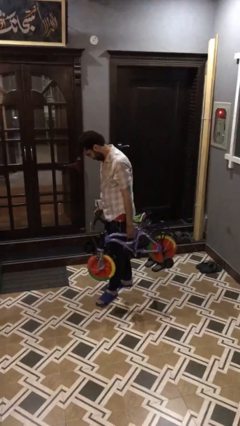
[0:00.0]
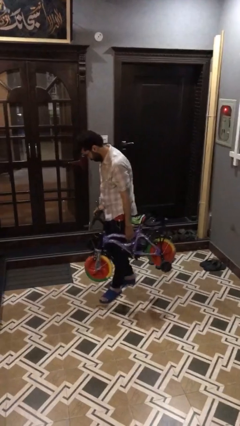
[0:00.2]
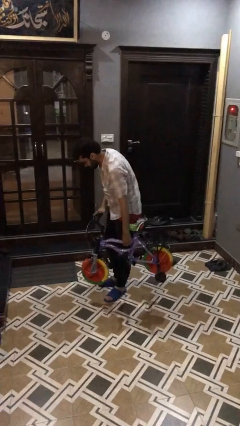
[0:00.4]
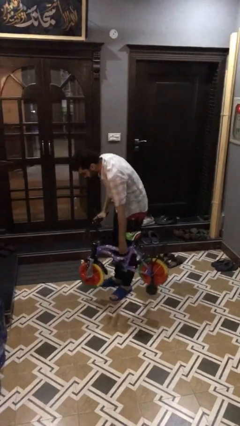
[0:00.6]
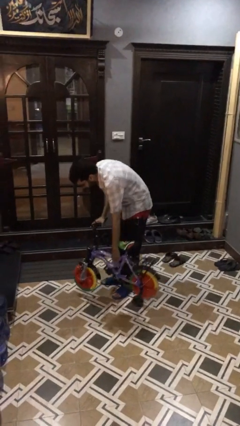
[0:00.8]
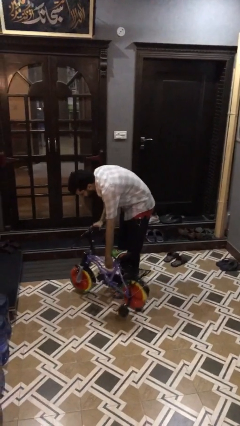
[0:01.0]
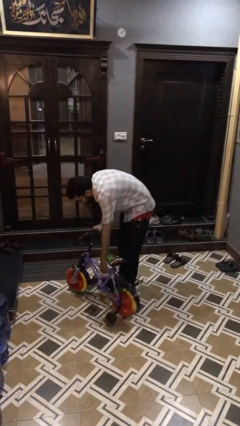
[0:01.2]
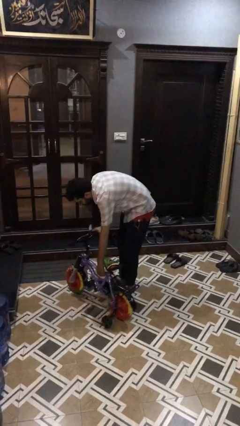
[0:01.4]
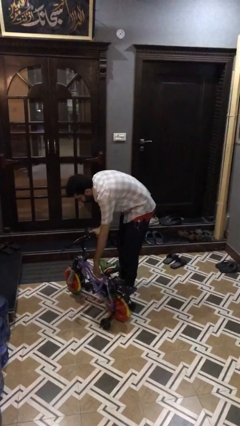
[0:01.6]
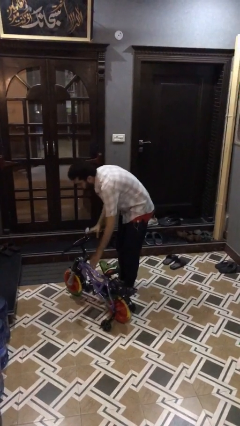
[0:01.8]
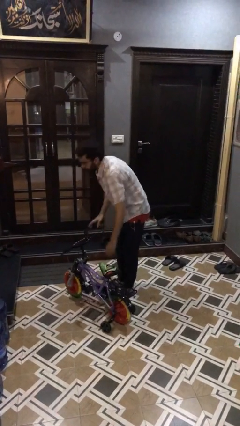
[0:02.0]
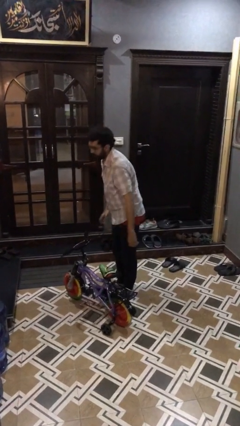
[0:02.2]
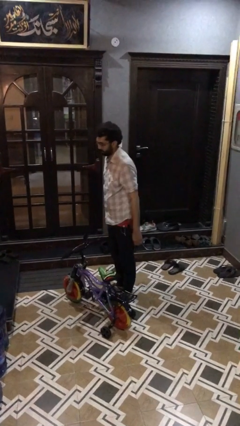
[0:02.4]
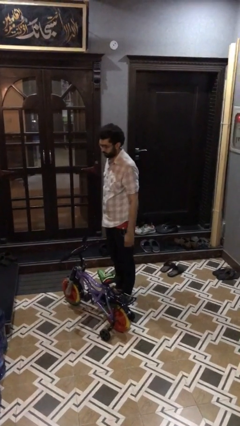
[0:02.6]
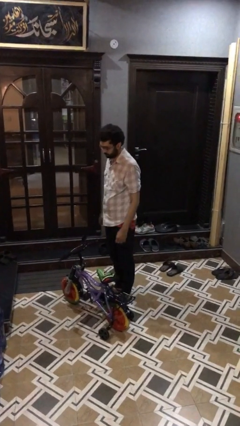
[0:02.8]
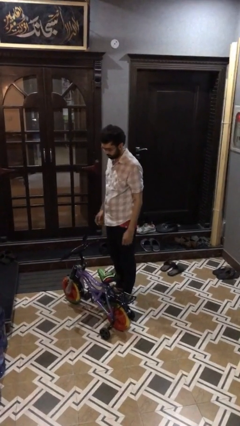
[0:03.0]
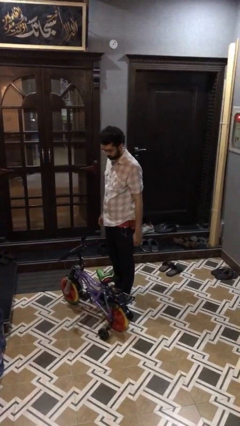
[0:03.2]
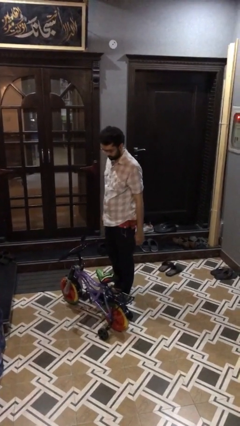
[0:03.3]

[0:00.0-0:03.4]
person puts down object on floor

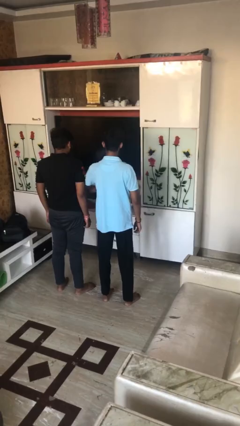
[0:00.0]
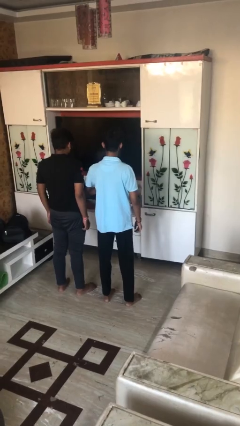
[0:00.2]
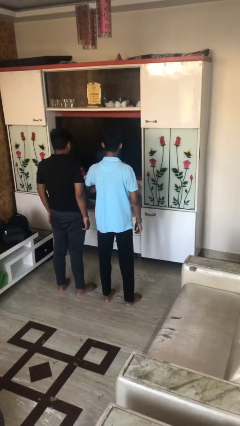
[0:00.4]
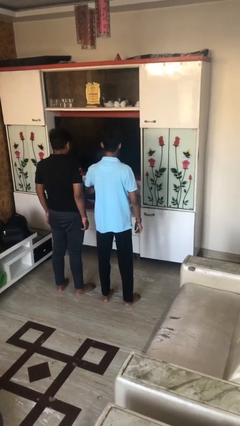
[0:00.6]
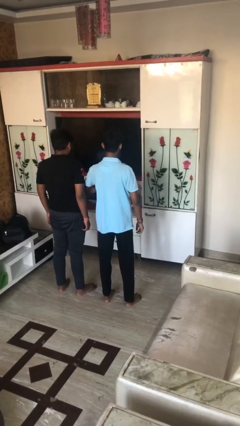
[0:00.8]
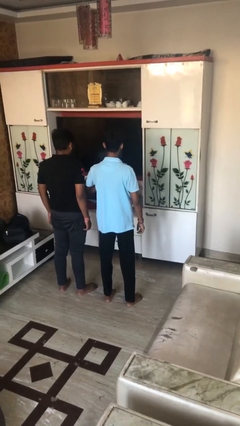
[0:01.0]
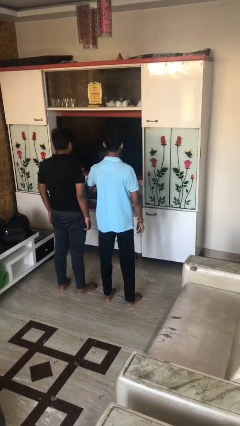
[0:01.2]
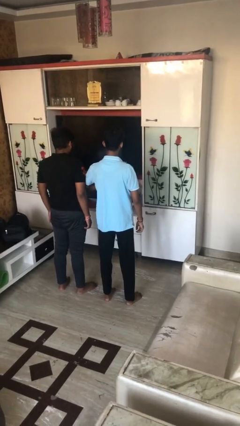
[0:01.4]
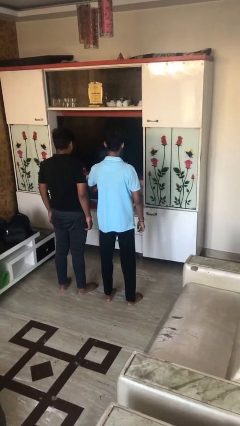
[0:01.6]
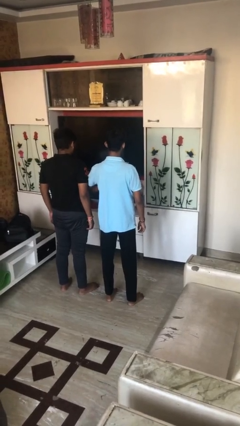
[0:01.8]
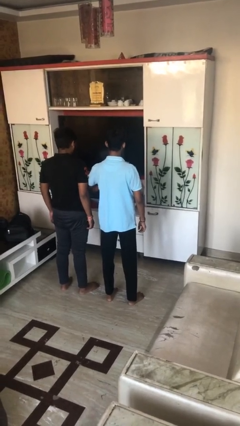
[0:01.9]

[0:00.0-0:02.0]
person nudges person with elbow

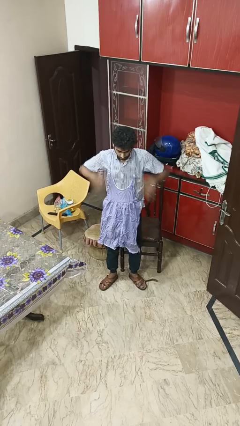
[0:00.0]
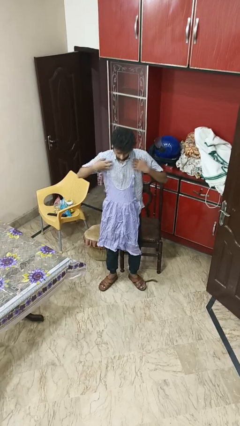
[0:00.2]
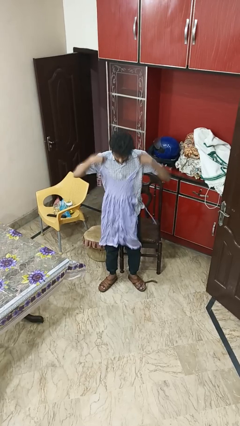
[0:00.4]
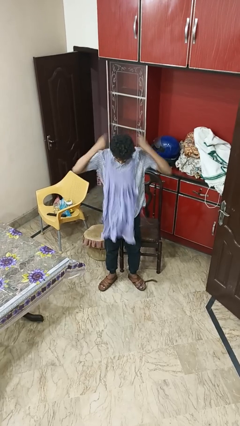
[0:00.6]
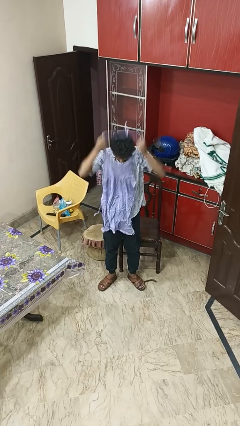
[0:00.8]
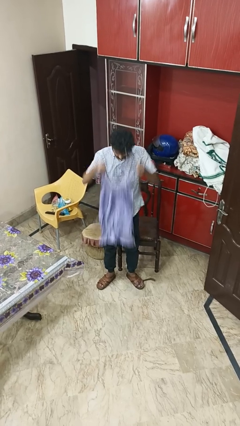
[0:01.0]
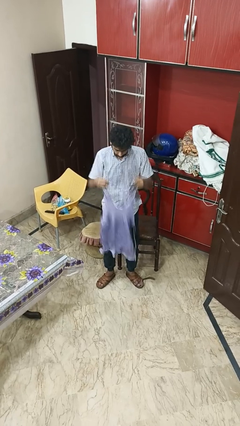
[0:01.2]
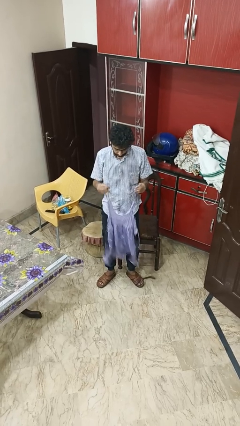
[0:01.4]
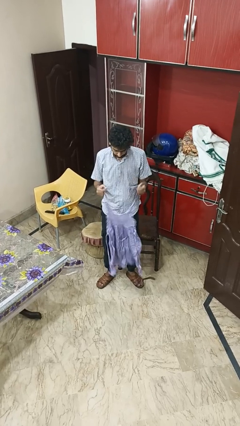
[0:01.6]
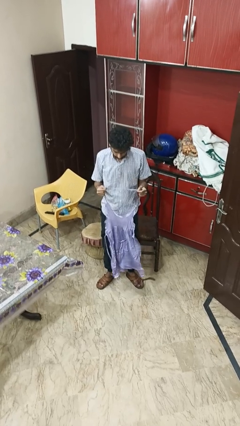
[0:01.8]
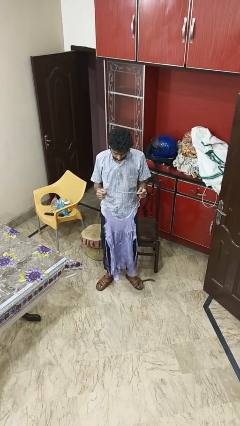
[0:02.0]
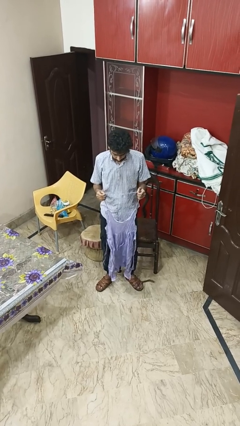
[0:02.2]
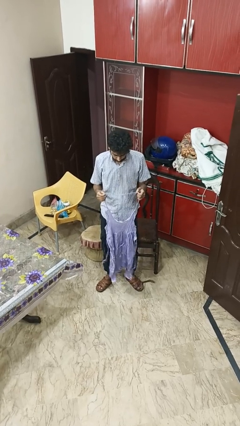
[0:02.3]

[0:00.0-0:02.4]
person takes off apron

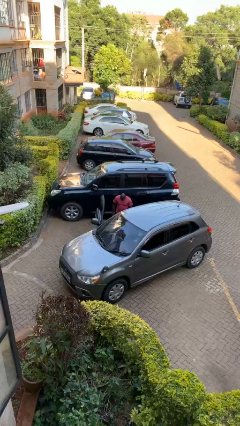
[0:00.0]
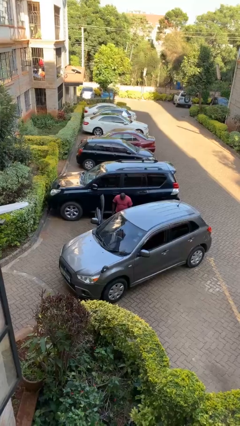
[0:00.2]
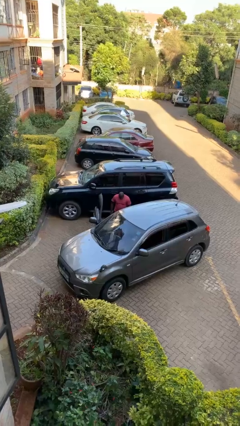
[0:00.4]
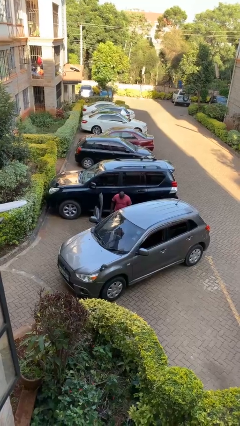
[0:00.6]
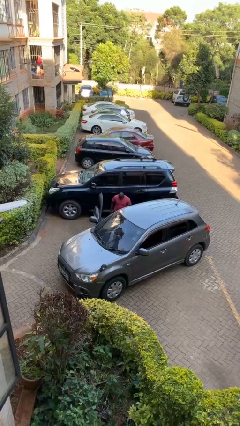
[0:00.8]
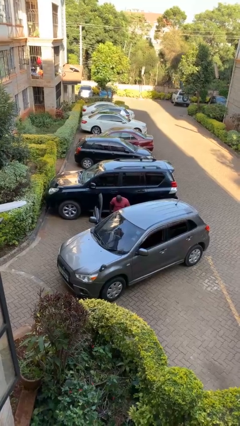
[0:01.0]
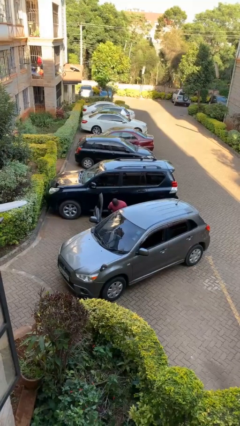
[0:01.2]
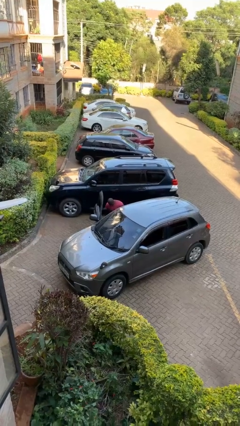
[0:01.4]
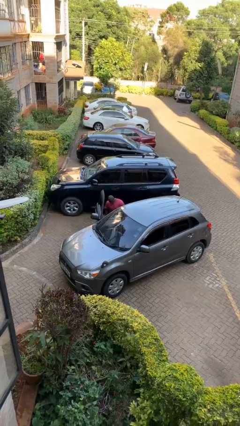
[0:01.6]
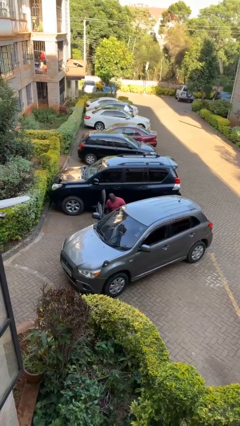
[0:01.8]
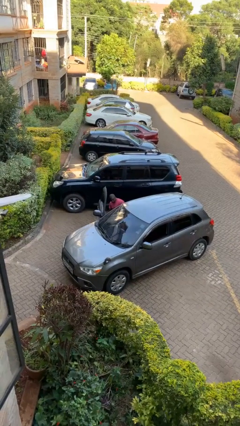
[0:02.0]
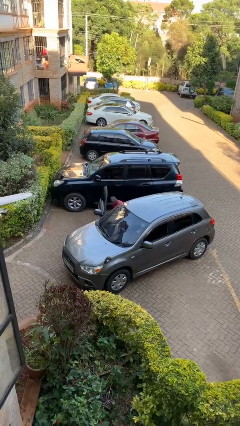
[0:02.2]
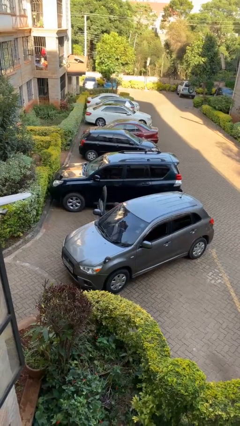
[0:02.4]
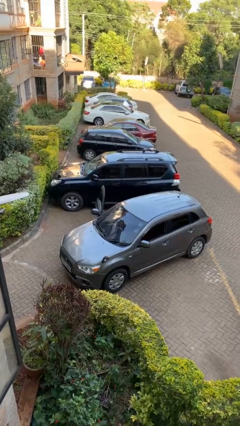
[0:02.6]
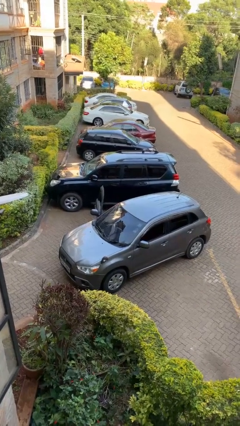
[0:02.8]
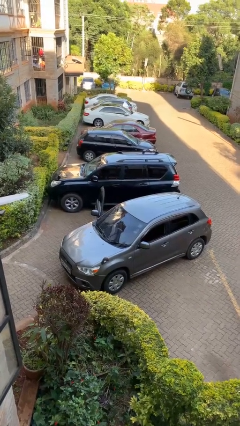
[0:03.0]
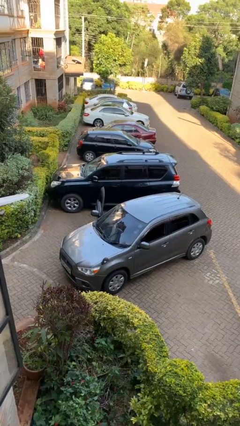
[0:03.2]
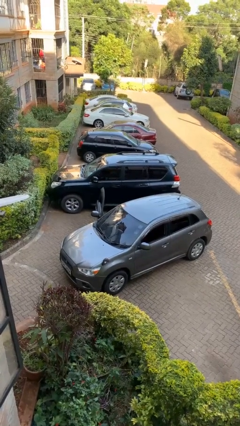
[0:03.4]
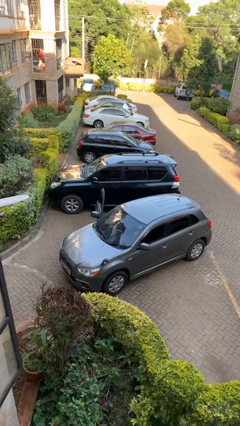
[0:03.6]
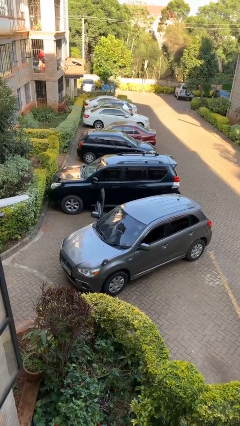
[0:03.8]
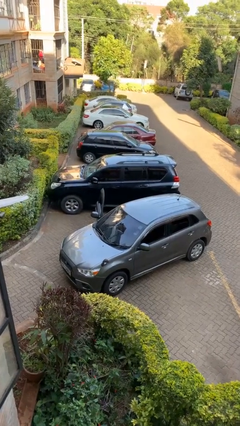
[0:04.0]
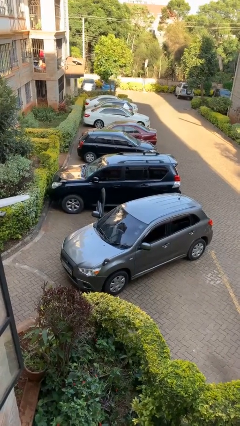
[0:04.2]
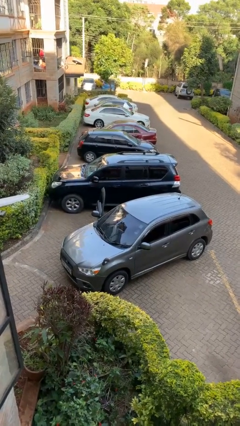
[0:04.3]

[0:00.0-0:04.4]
person enters car

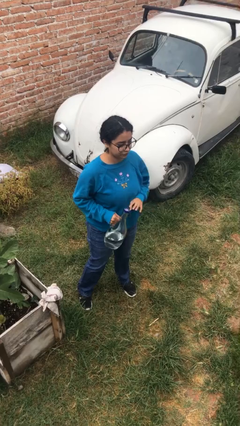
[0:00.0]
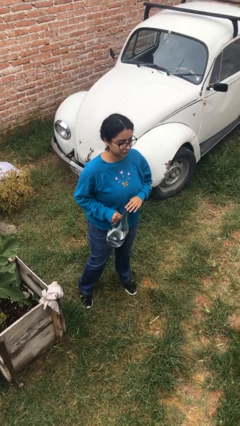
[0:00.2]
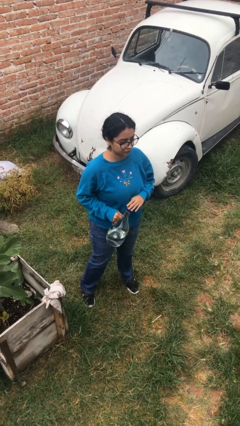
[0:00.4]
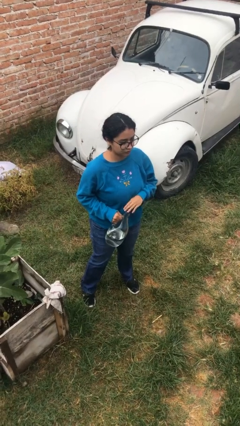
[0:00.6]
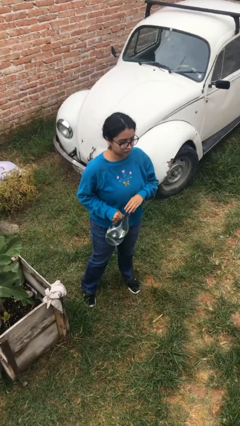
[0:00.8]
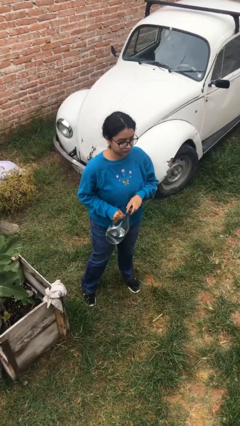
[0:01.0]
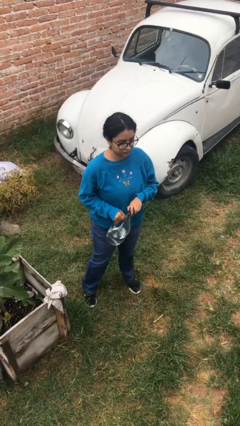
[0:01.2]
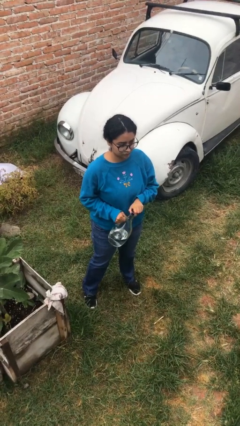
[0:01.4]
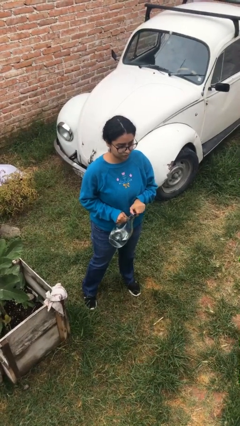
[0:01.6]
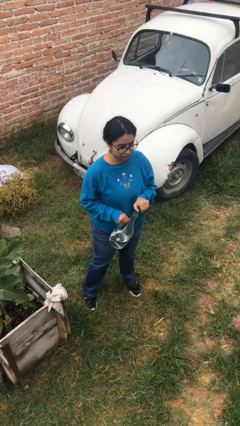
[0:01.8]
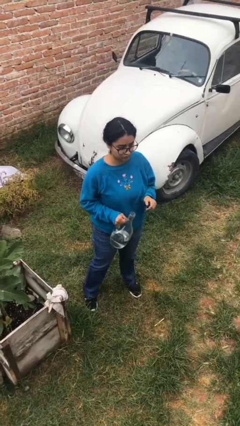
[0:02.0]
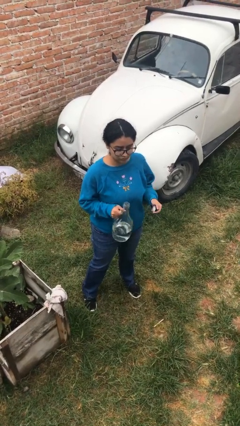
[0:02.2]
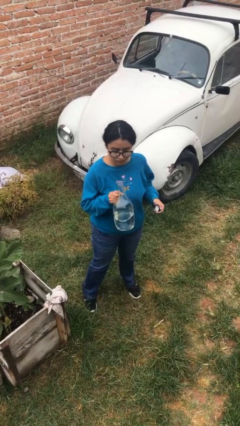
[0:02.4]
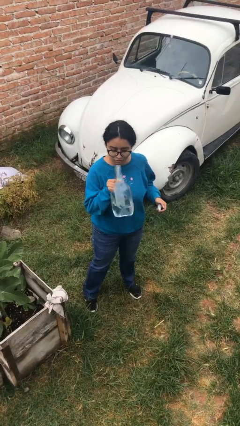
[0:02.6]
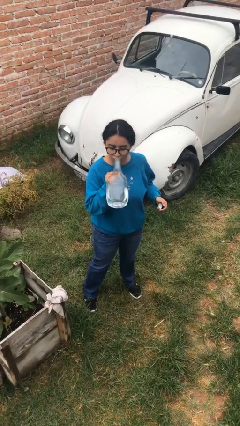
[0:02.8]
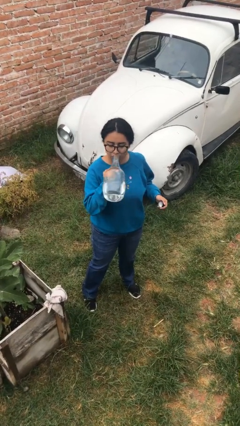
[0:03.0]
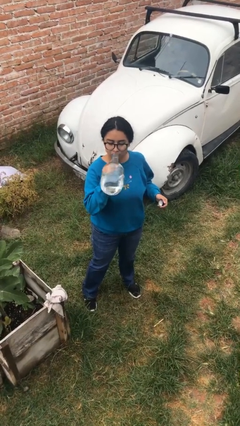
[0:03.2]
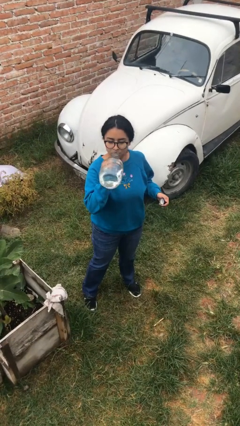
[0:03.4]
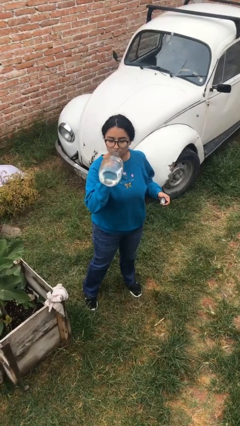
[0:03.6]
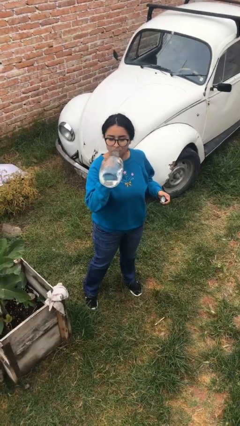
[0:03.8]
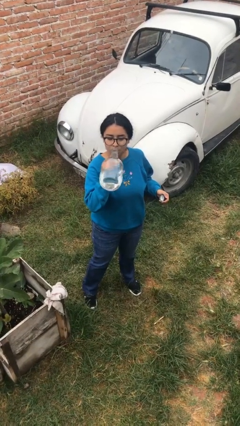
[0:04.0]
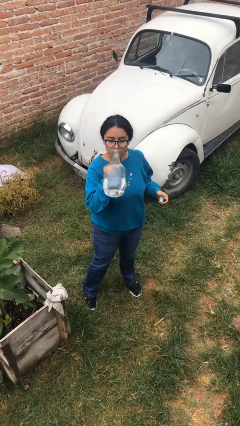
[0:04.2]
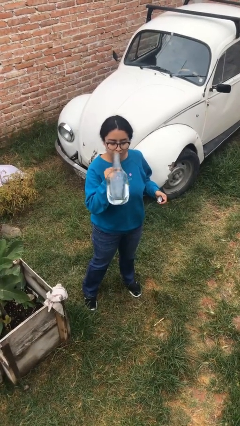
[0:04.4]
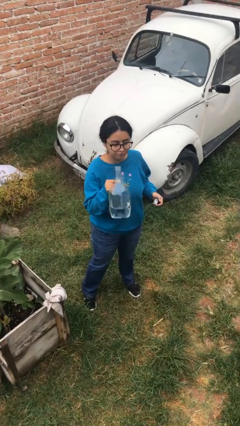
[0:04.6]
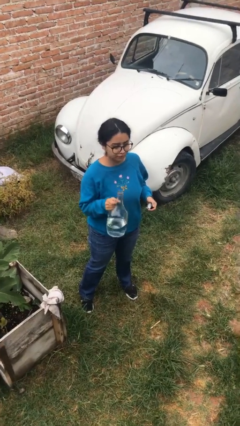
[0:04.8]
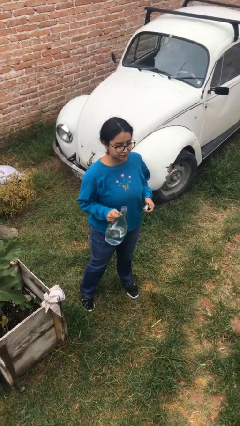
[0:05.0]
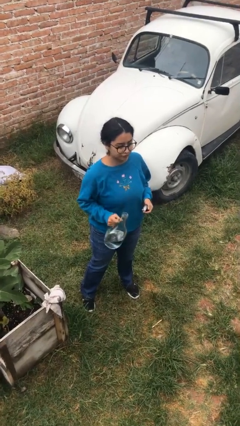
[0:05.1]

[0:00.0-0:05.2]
person drinks from bottle

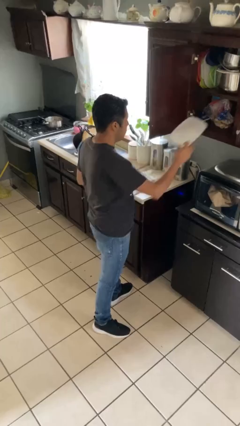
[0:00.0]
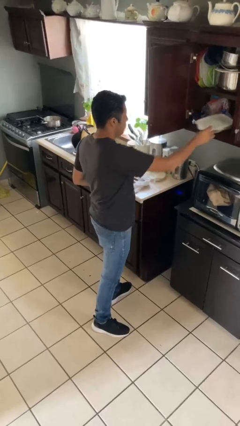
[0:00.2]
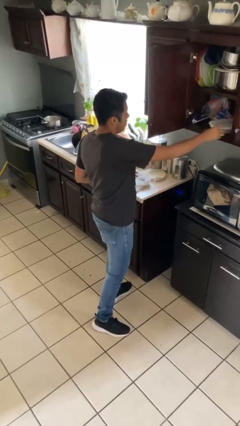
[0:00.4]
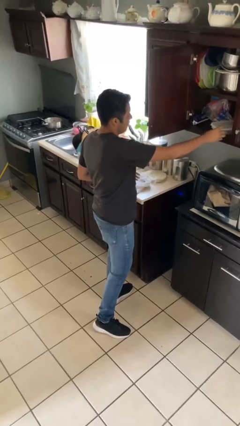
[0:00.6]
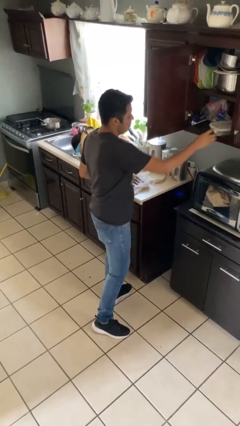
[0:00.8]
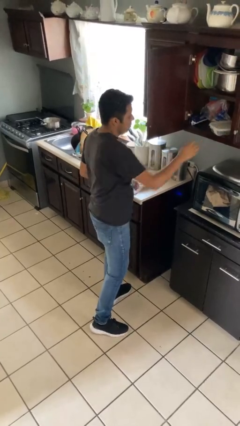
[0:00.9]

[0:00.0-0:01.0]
person puts down object into cabinet
